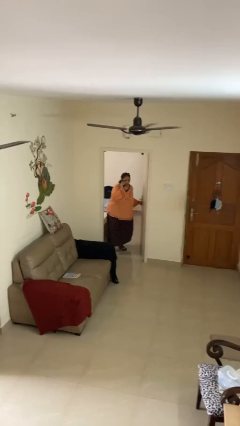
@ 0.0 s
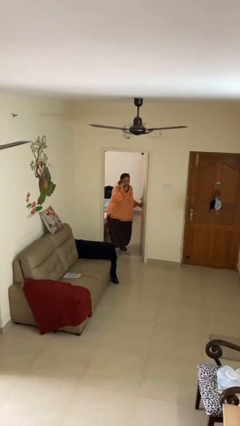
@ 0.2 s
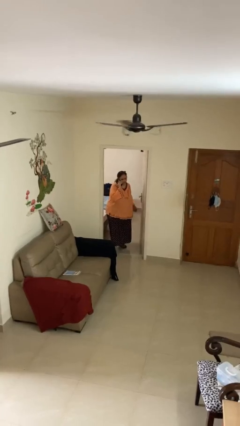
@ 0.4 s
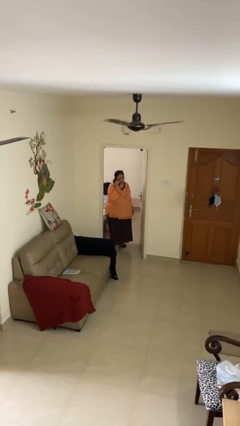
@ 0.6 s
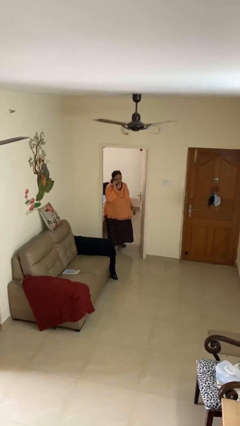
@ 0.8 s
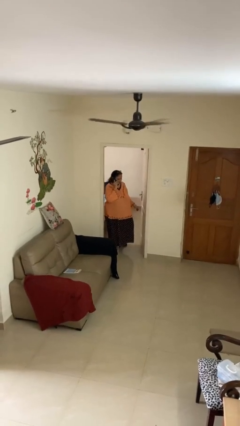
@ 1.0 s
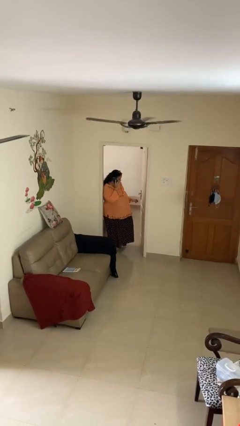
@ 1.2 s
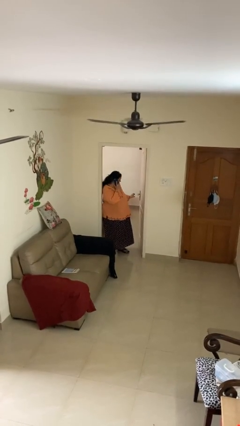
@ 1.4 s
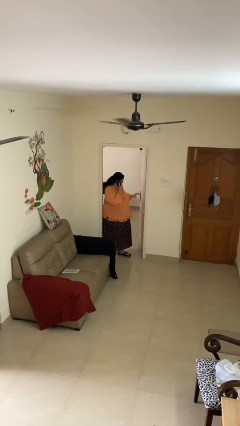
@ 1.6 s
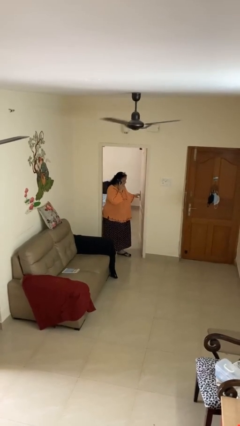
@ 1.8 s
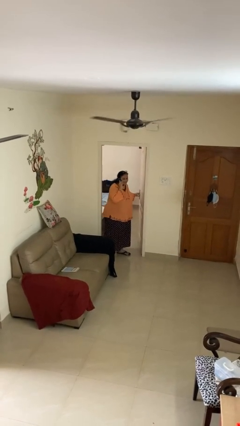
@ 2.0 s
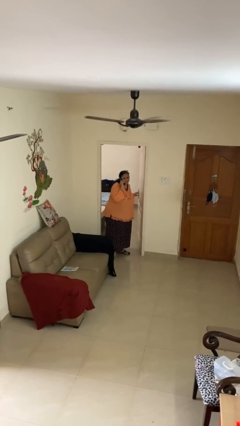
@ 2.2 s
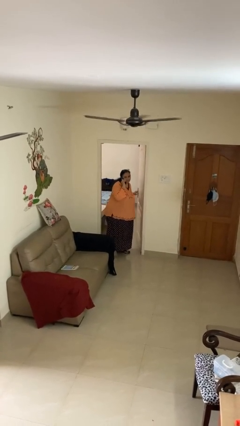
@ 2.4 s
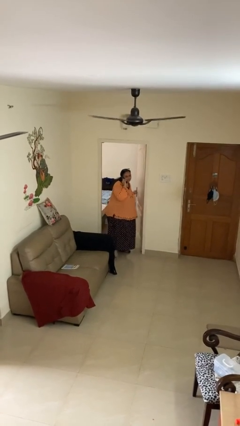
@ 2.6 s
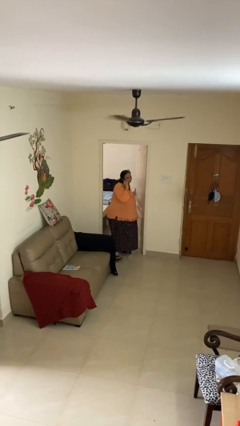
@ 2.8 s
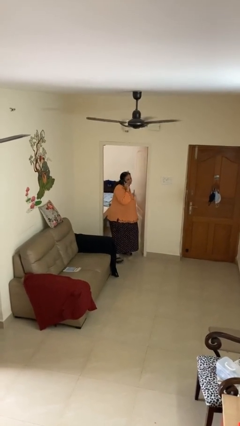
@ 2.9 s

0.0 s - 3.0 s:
person enters scene through structure

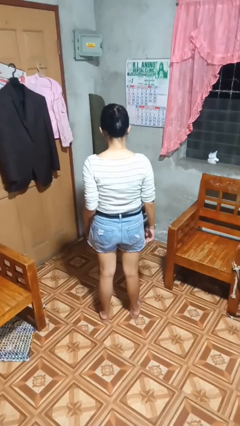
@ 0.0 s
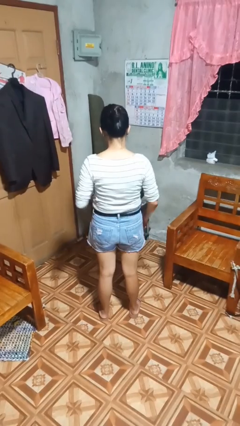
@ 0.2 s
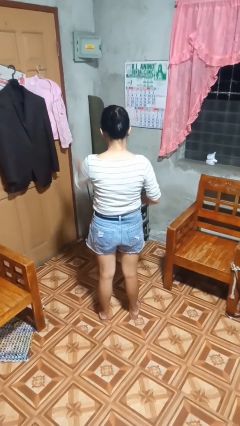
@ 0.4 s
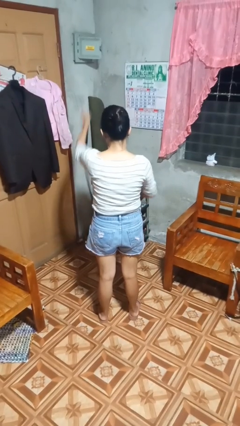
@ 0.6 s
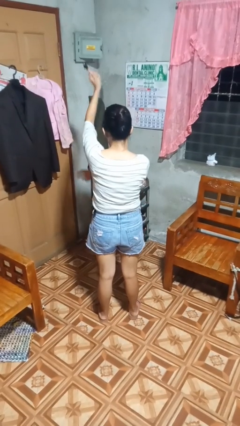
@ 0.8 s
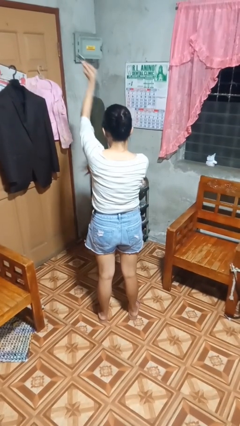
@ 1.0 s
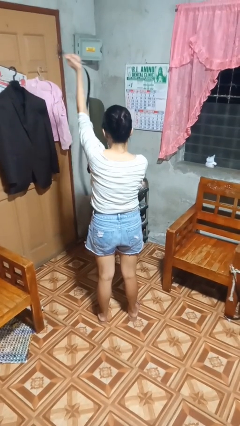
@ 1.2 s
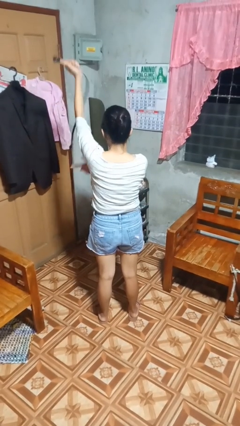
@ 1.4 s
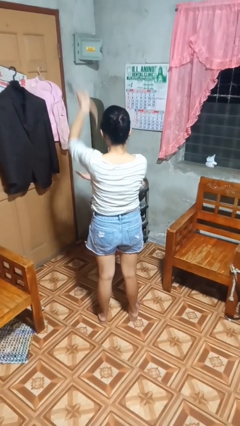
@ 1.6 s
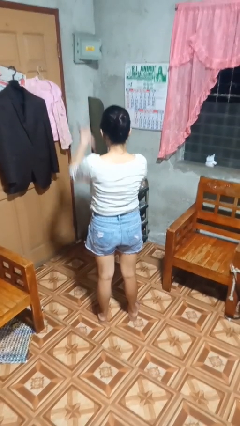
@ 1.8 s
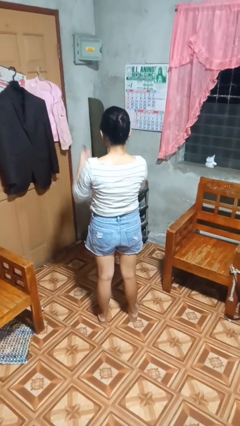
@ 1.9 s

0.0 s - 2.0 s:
person takes off belt

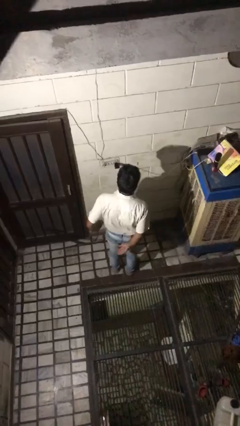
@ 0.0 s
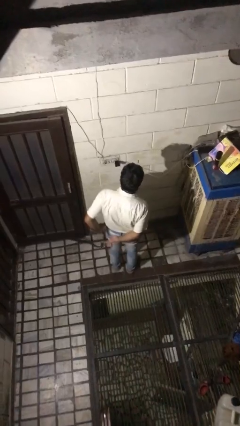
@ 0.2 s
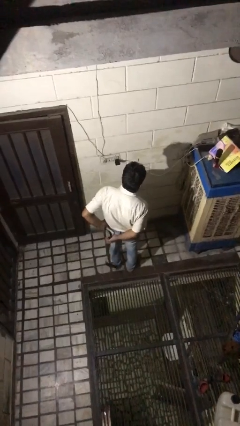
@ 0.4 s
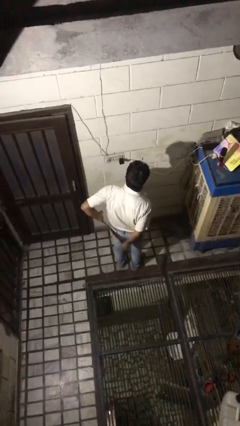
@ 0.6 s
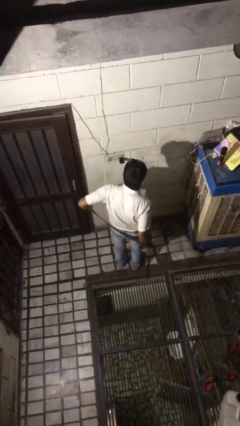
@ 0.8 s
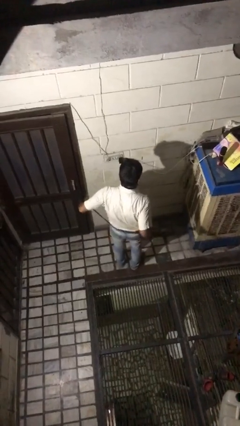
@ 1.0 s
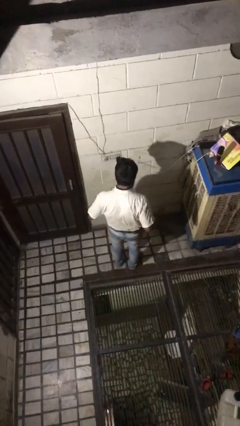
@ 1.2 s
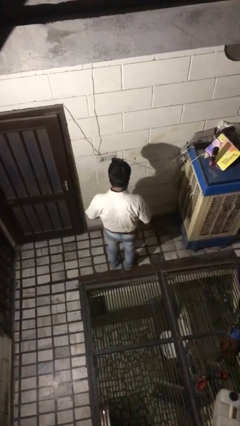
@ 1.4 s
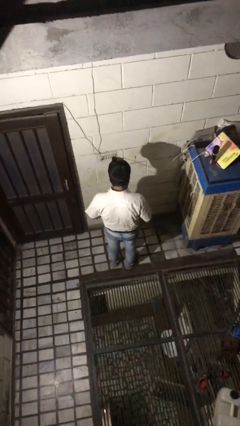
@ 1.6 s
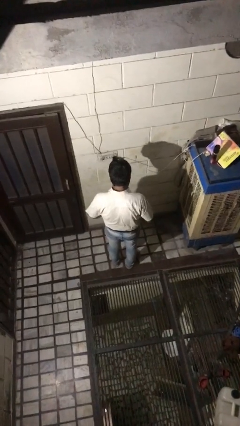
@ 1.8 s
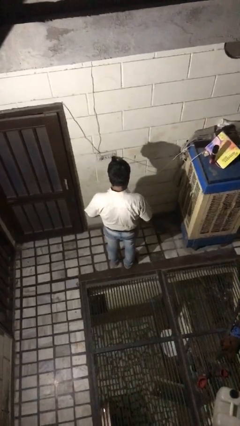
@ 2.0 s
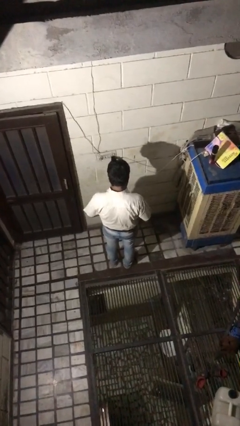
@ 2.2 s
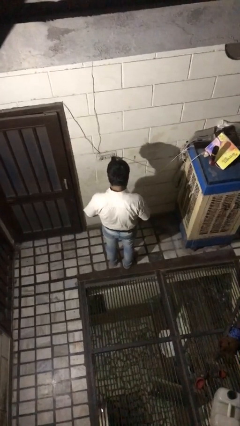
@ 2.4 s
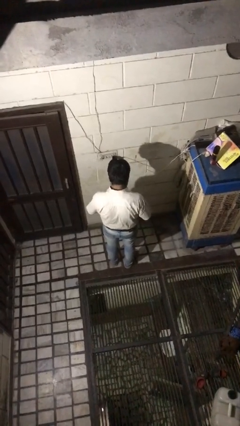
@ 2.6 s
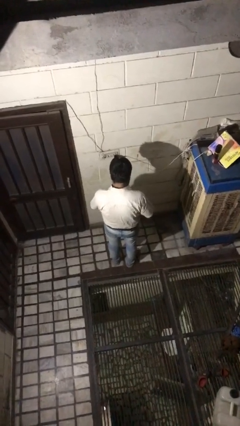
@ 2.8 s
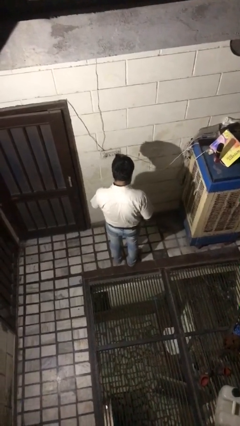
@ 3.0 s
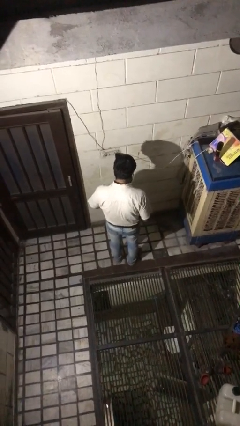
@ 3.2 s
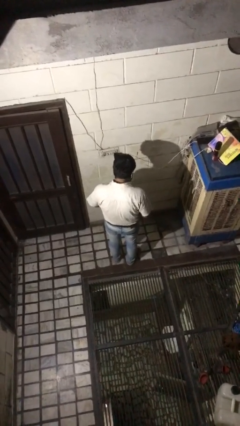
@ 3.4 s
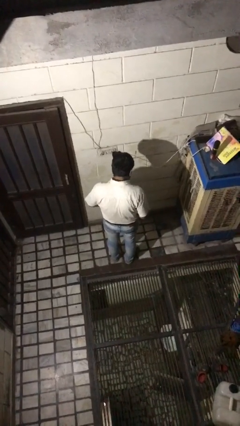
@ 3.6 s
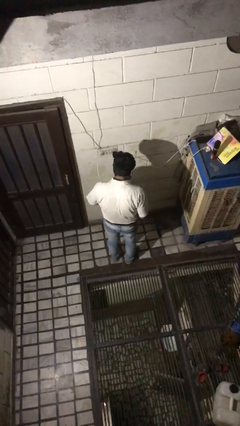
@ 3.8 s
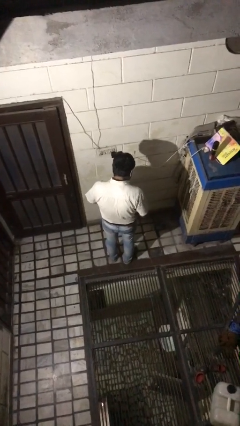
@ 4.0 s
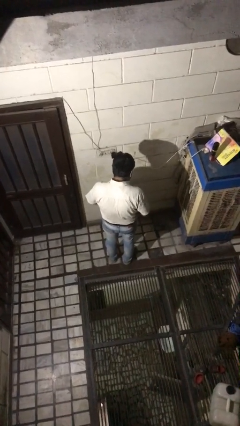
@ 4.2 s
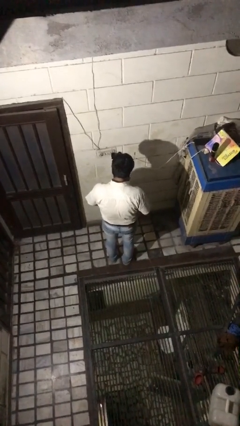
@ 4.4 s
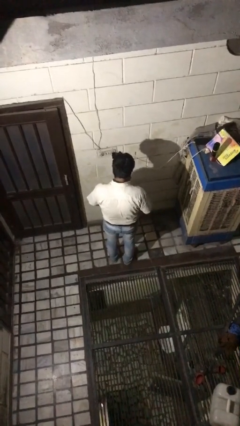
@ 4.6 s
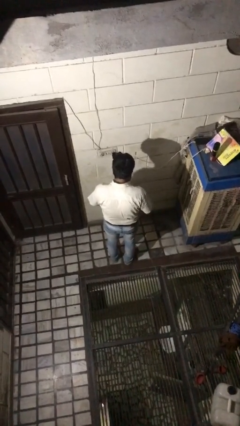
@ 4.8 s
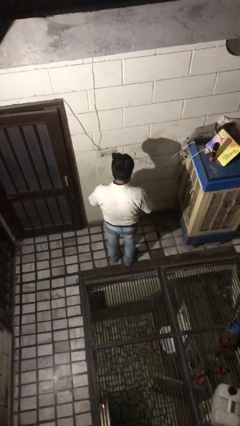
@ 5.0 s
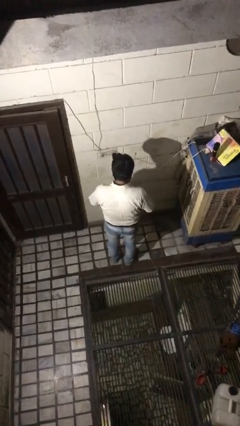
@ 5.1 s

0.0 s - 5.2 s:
person puts on belt

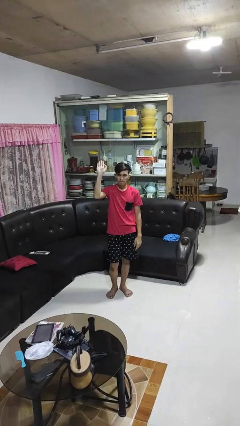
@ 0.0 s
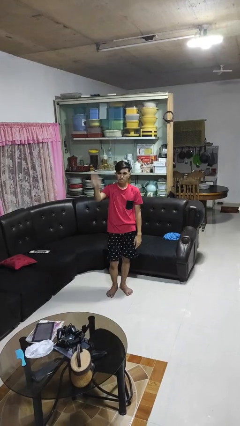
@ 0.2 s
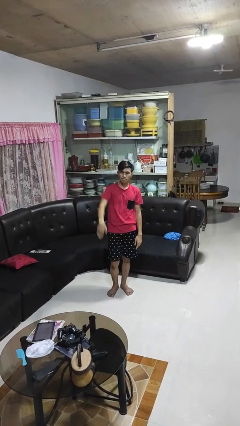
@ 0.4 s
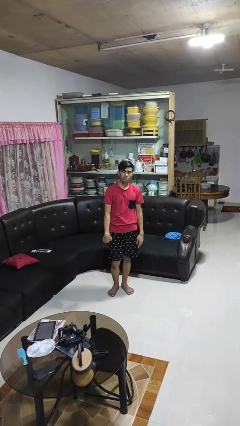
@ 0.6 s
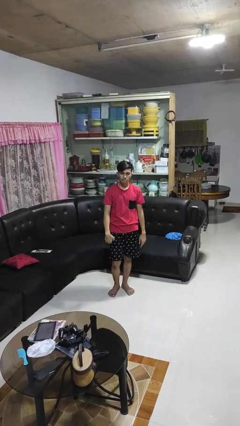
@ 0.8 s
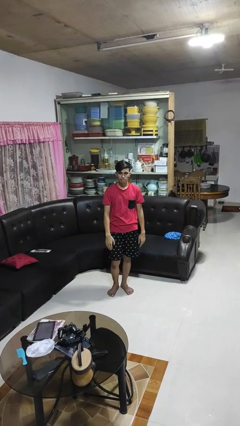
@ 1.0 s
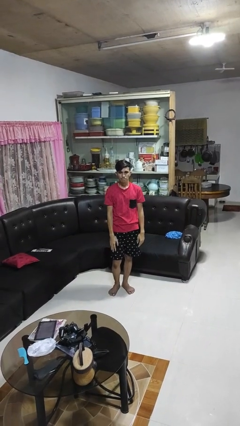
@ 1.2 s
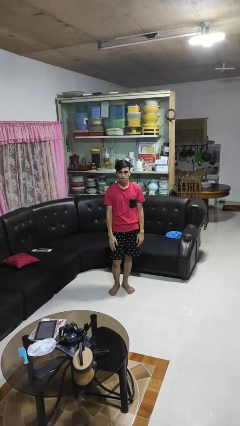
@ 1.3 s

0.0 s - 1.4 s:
person gestures swipe down

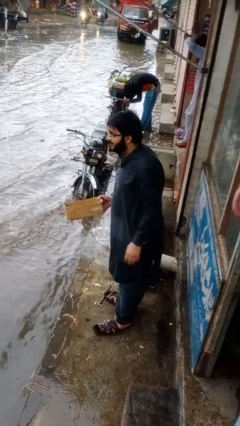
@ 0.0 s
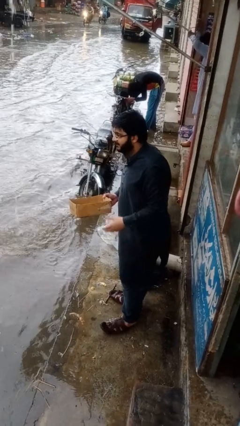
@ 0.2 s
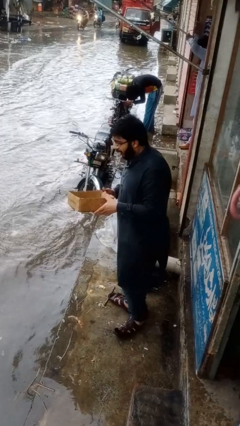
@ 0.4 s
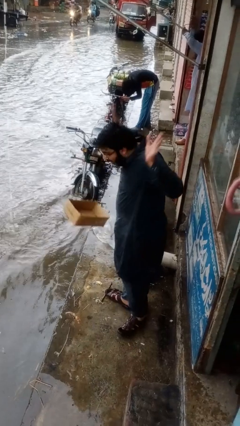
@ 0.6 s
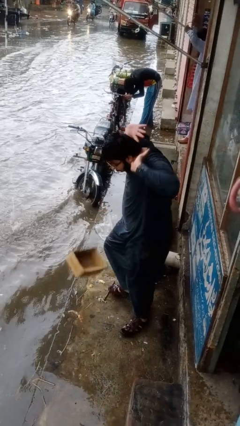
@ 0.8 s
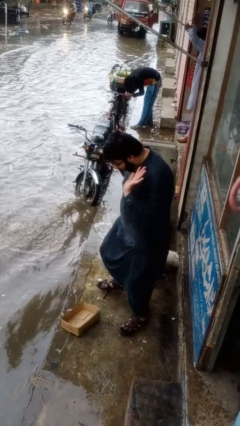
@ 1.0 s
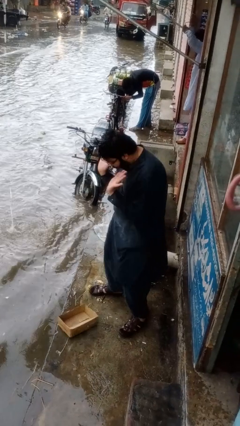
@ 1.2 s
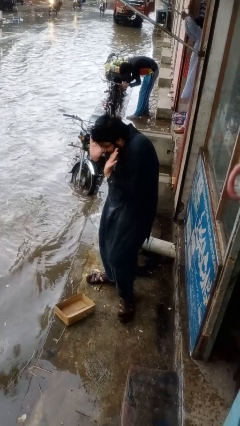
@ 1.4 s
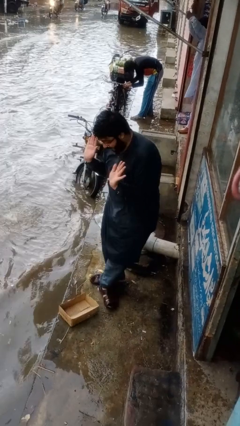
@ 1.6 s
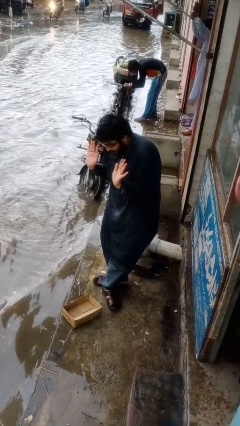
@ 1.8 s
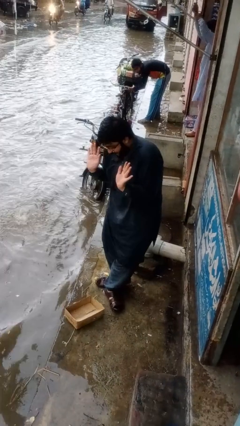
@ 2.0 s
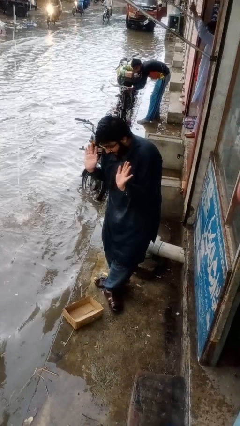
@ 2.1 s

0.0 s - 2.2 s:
person drops object

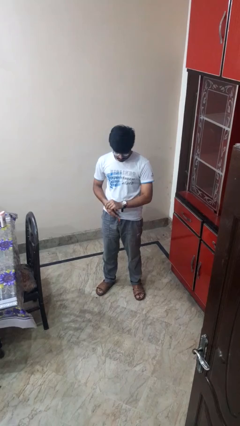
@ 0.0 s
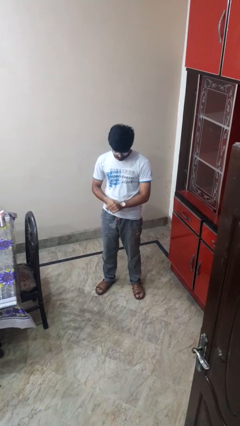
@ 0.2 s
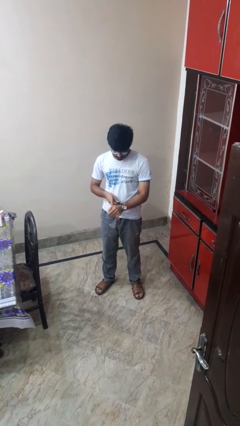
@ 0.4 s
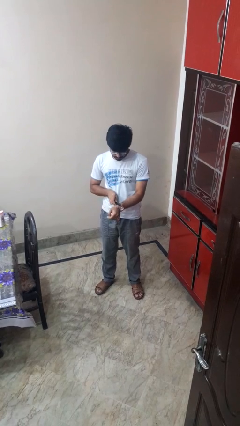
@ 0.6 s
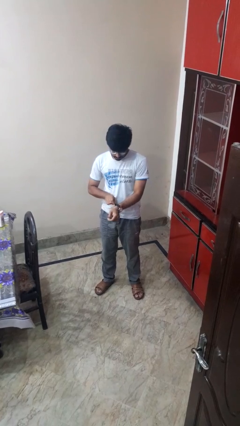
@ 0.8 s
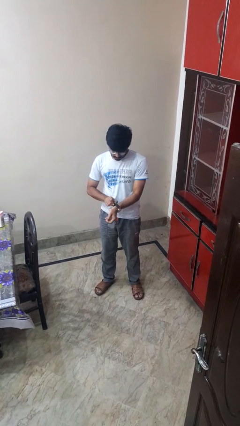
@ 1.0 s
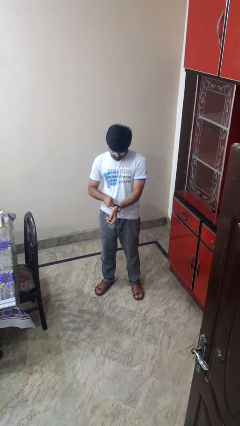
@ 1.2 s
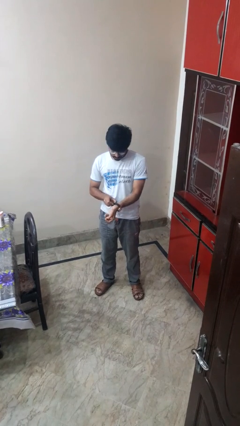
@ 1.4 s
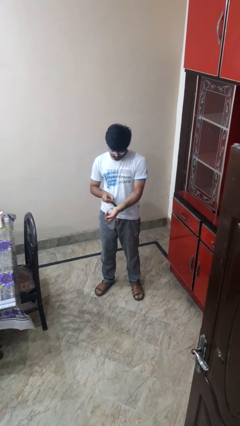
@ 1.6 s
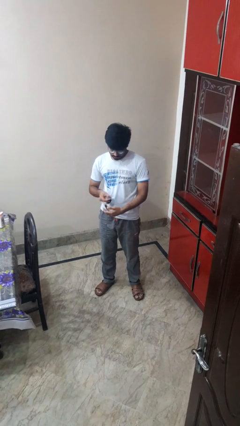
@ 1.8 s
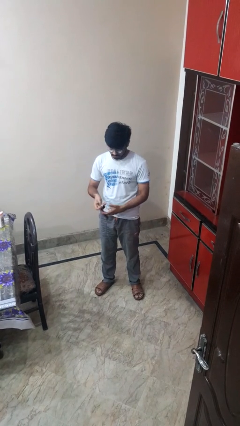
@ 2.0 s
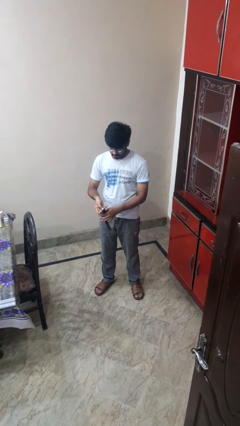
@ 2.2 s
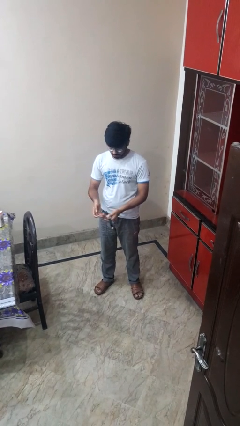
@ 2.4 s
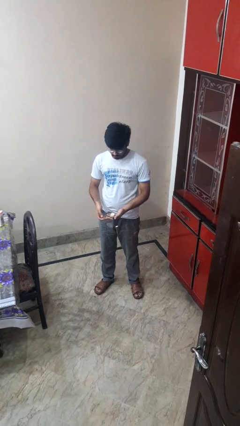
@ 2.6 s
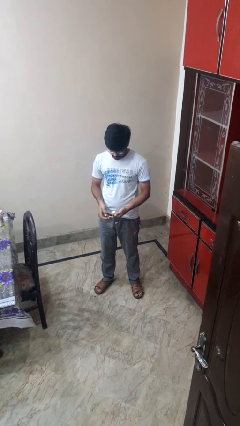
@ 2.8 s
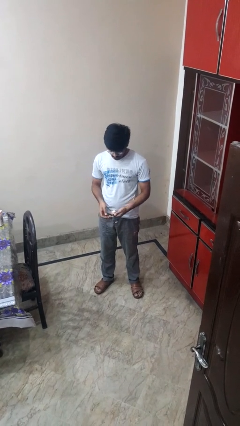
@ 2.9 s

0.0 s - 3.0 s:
person takes off wristwatch

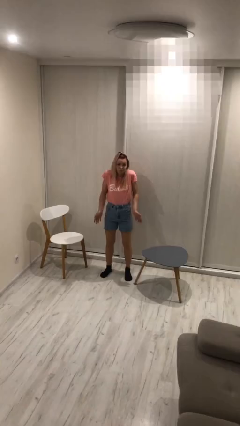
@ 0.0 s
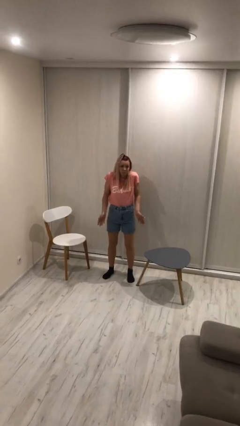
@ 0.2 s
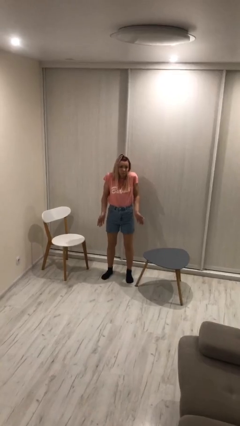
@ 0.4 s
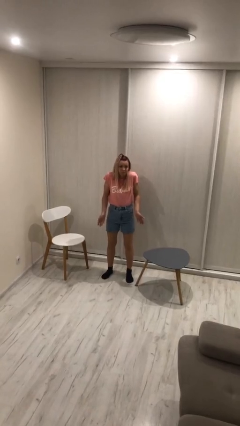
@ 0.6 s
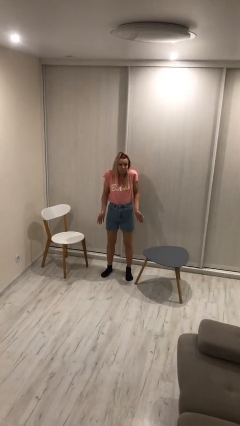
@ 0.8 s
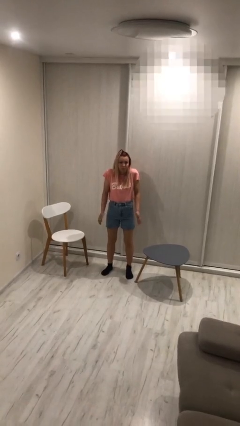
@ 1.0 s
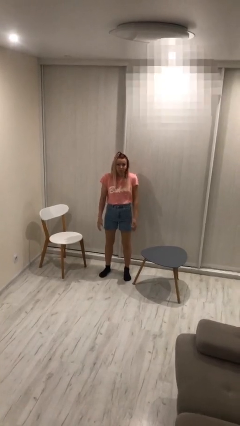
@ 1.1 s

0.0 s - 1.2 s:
person shrugs
